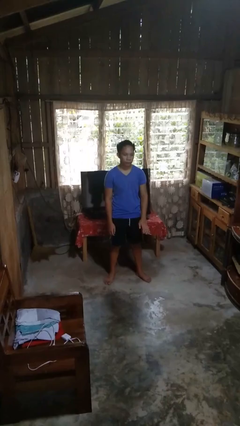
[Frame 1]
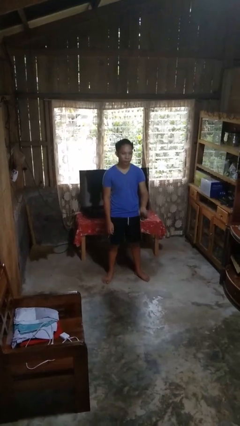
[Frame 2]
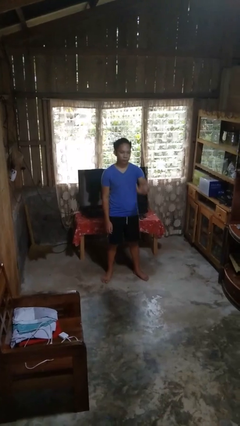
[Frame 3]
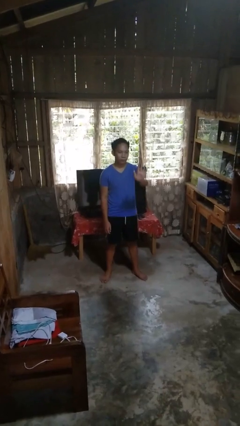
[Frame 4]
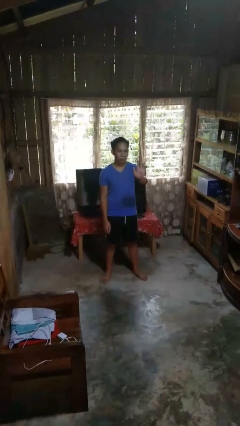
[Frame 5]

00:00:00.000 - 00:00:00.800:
person gestures stop

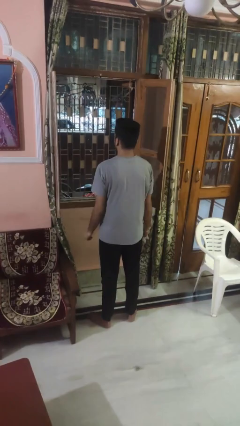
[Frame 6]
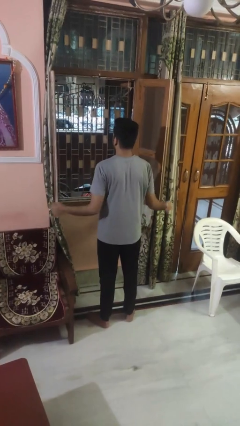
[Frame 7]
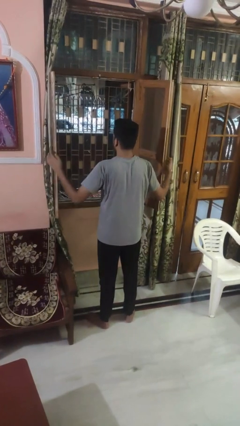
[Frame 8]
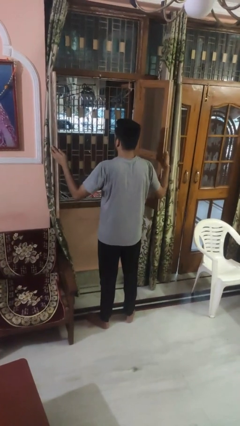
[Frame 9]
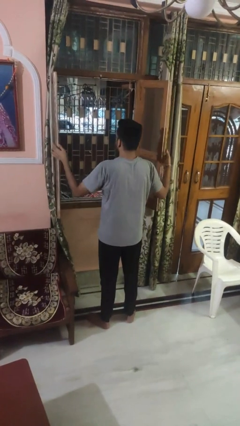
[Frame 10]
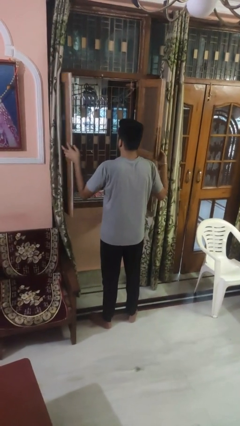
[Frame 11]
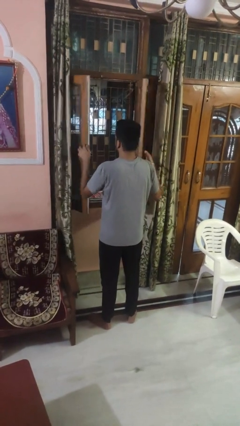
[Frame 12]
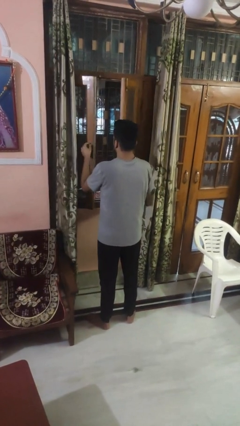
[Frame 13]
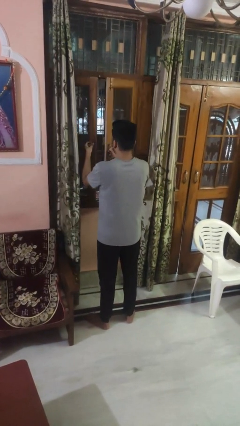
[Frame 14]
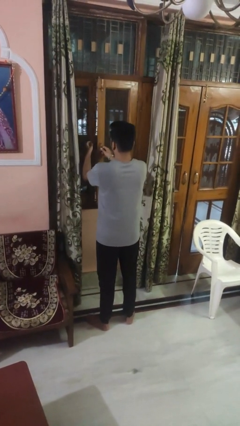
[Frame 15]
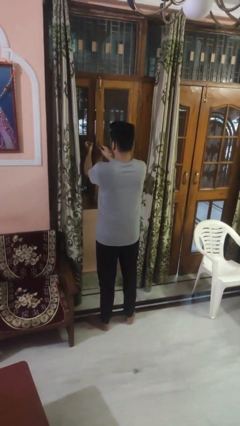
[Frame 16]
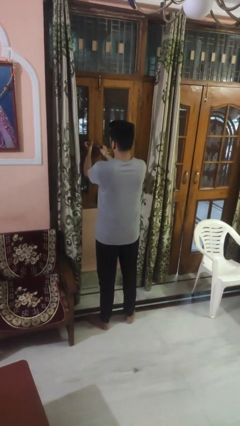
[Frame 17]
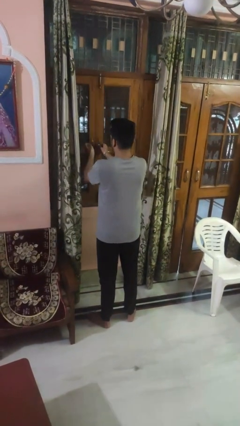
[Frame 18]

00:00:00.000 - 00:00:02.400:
person closes home window

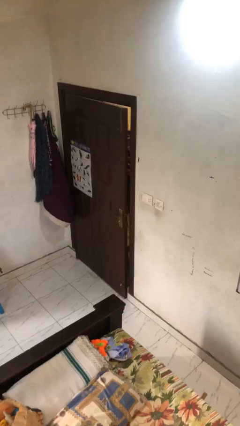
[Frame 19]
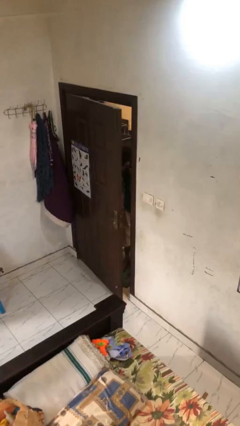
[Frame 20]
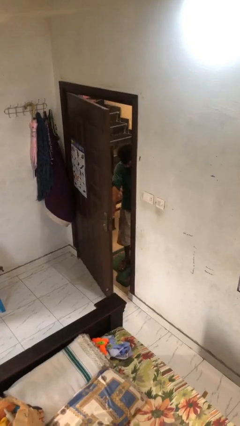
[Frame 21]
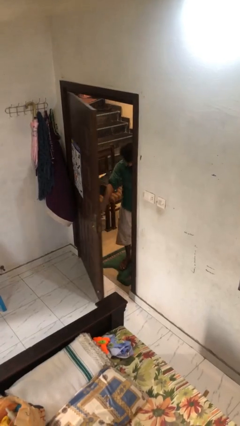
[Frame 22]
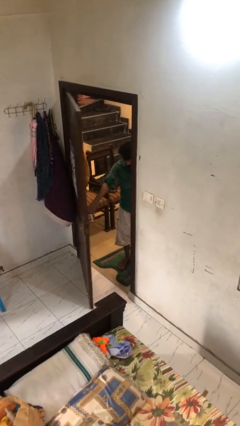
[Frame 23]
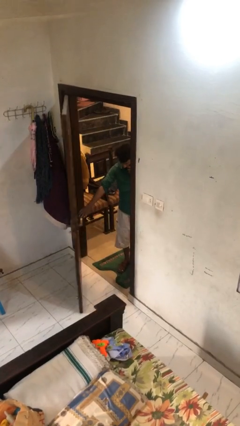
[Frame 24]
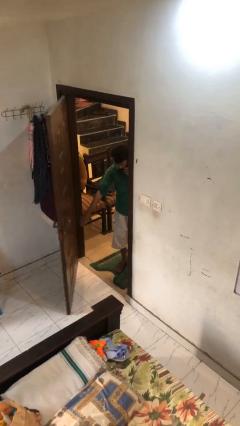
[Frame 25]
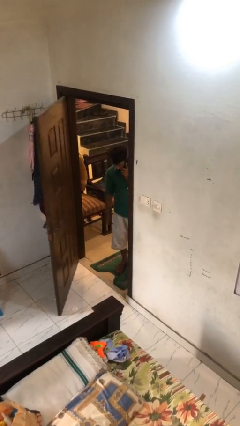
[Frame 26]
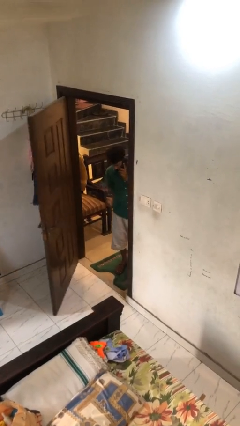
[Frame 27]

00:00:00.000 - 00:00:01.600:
person opens facility door

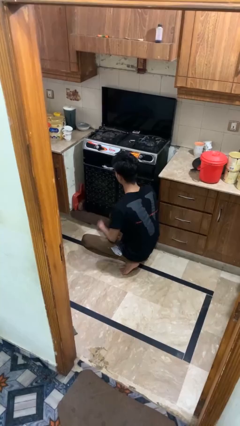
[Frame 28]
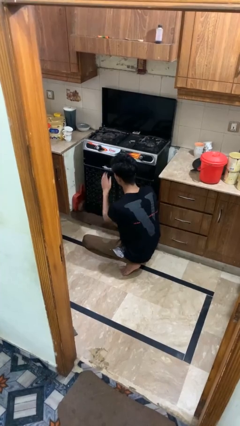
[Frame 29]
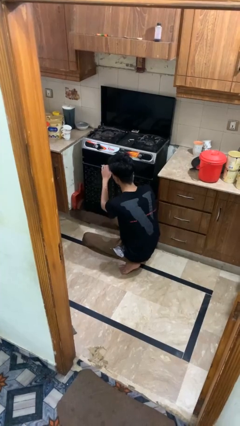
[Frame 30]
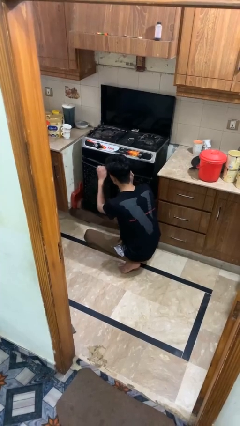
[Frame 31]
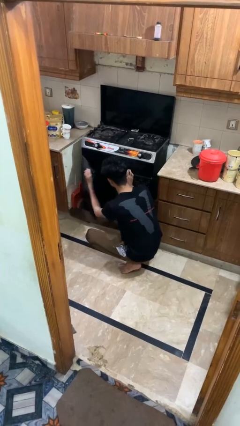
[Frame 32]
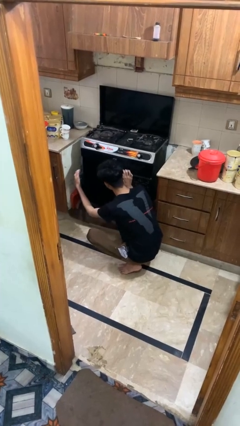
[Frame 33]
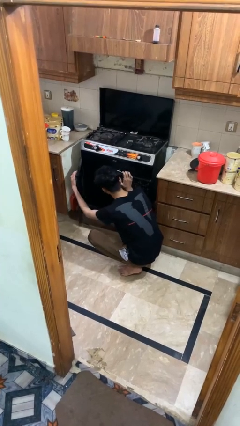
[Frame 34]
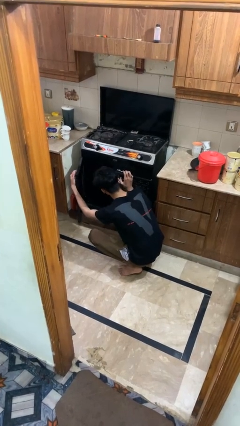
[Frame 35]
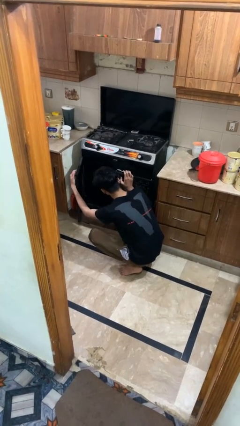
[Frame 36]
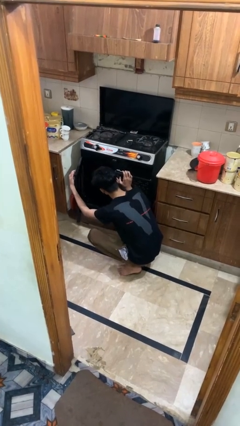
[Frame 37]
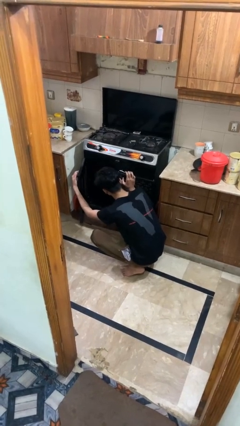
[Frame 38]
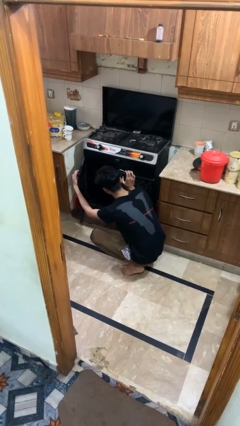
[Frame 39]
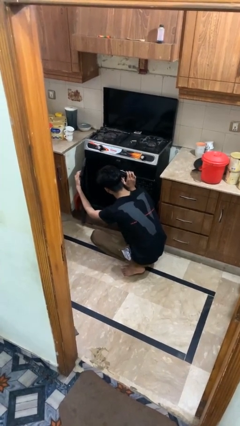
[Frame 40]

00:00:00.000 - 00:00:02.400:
person opens oven door

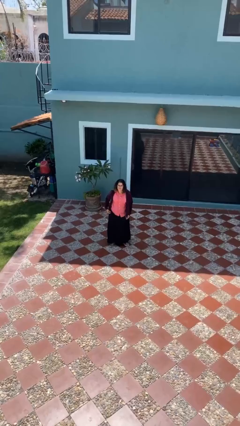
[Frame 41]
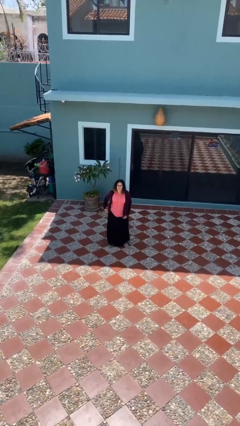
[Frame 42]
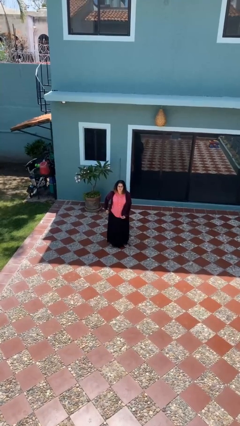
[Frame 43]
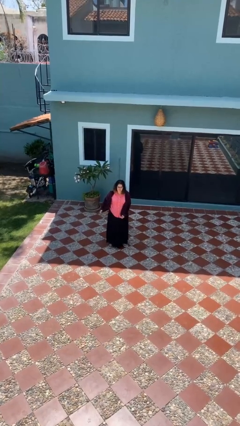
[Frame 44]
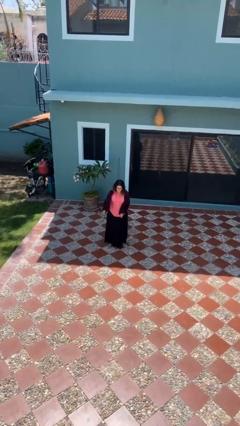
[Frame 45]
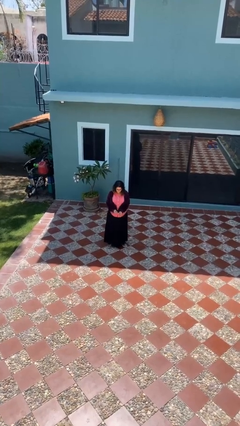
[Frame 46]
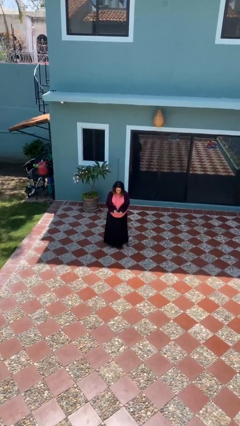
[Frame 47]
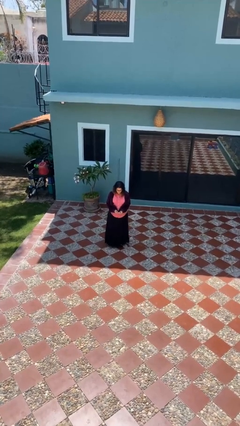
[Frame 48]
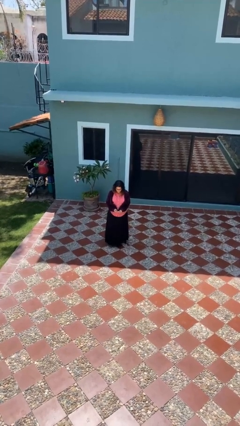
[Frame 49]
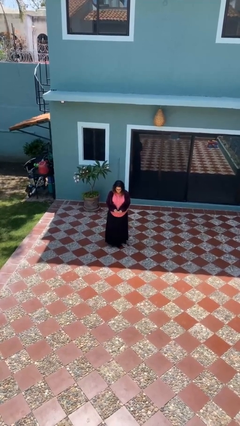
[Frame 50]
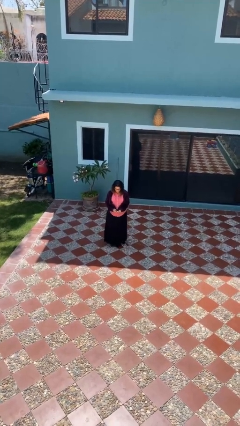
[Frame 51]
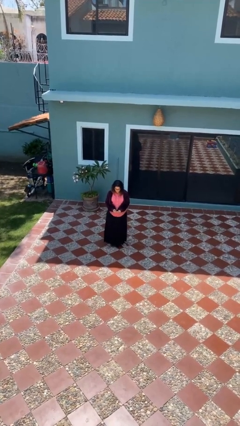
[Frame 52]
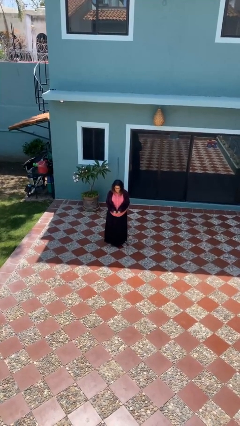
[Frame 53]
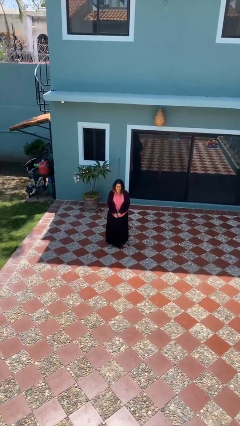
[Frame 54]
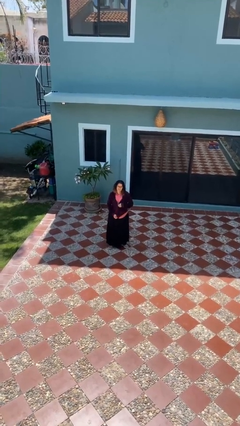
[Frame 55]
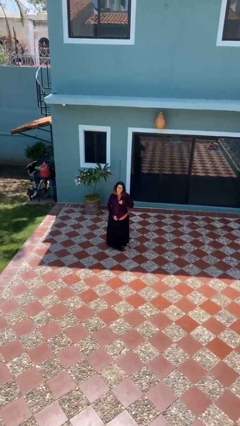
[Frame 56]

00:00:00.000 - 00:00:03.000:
person zips up jacket

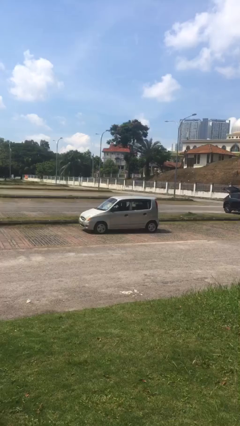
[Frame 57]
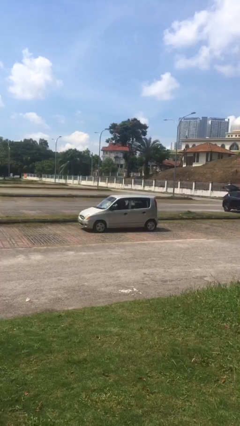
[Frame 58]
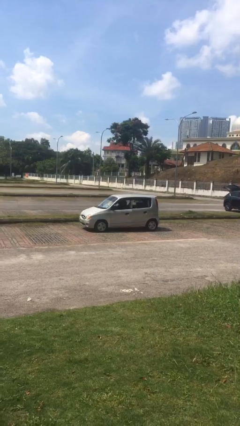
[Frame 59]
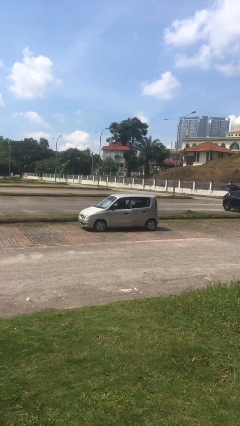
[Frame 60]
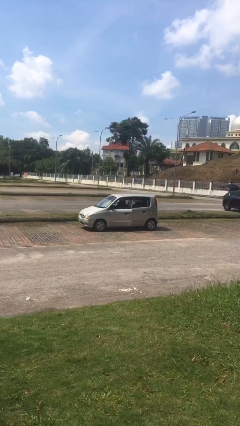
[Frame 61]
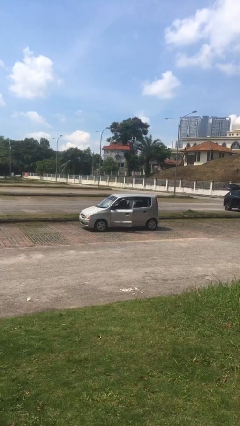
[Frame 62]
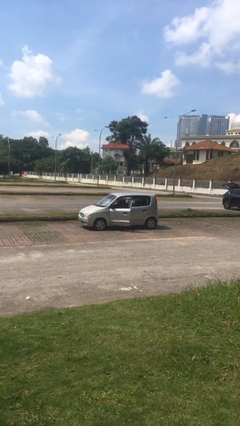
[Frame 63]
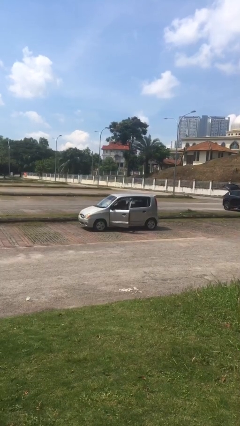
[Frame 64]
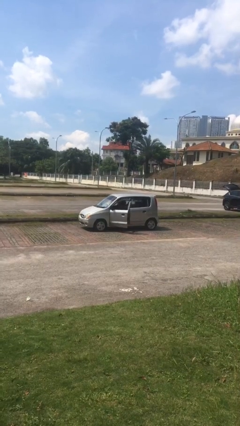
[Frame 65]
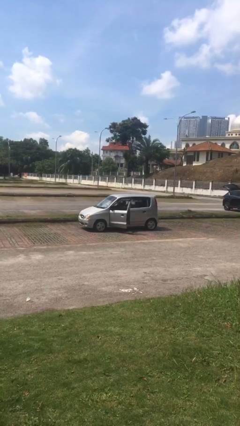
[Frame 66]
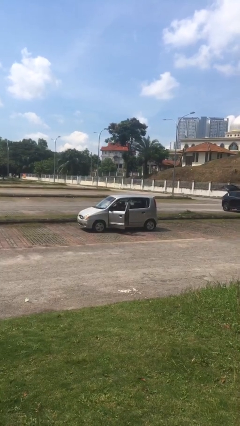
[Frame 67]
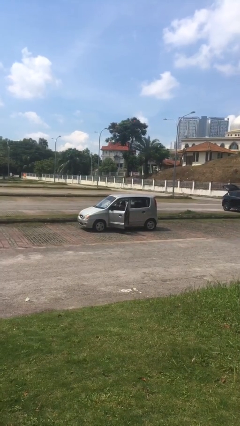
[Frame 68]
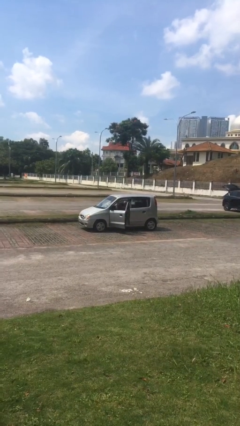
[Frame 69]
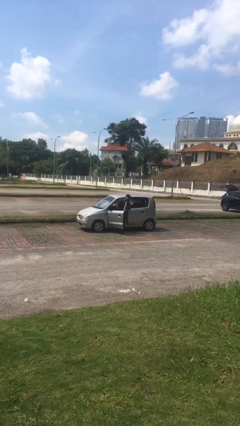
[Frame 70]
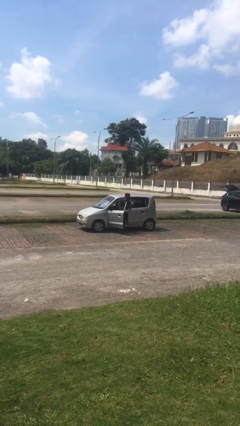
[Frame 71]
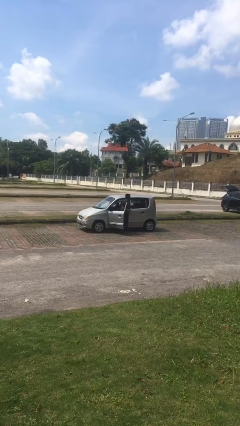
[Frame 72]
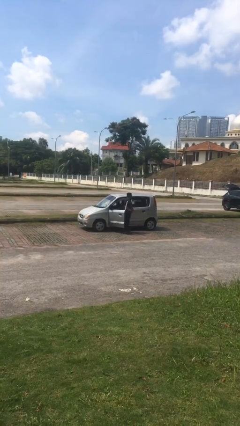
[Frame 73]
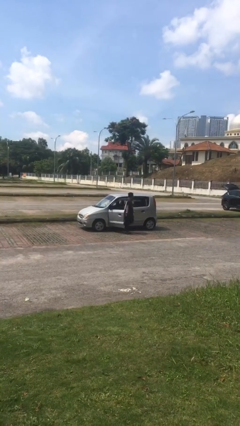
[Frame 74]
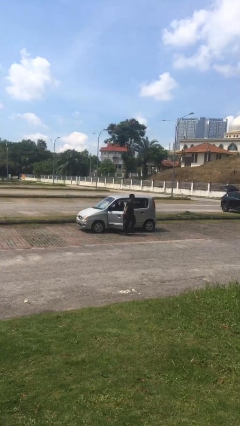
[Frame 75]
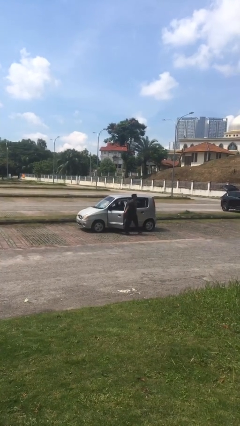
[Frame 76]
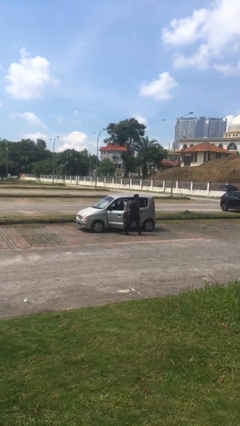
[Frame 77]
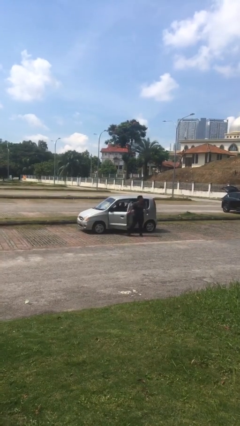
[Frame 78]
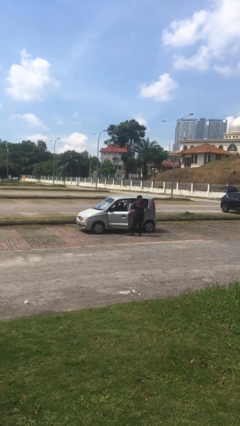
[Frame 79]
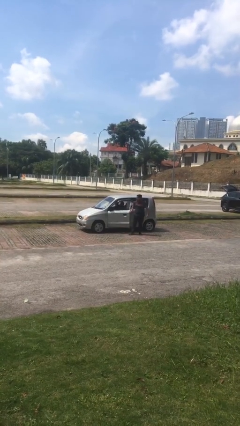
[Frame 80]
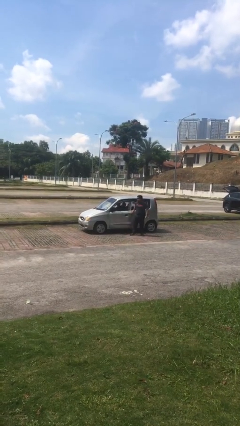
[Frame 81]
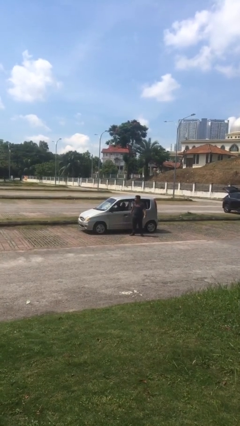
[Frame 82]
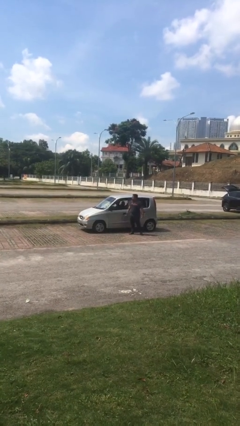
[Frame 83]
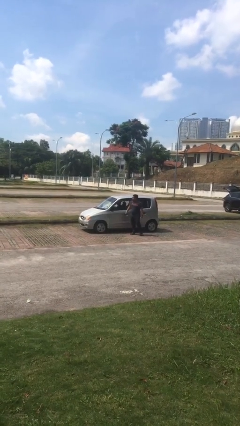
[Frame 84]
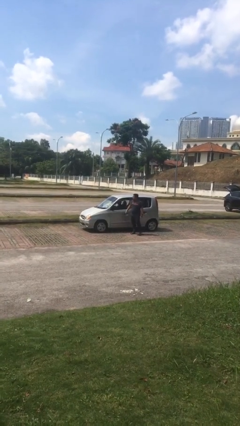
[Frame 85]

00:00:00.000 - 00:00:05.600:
car drops off person

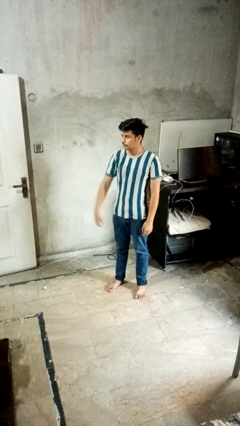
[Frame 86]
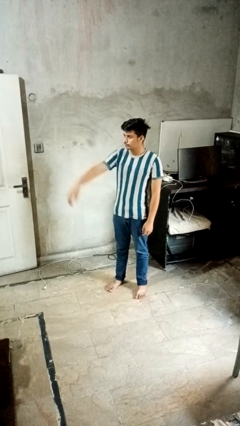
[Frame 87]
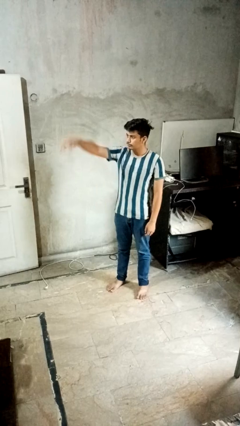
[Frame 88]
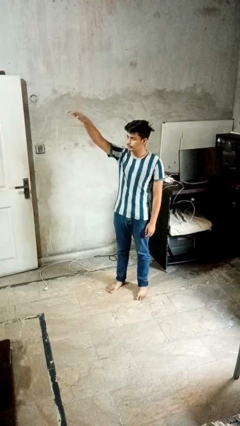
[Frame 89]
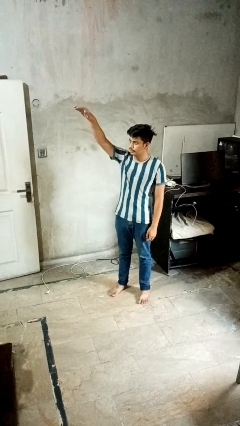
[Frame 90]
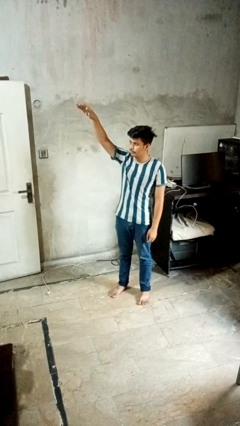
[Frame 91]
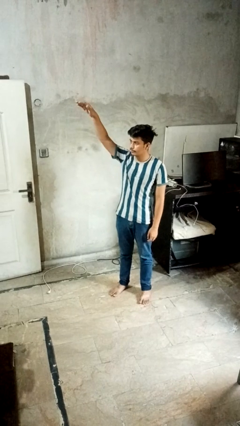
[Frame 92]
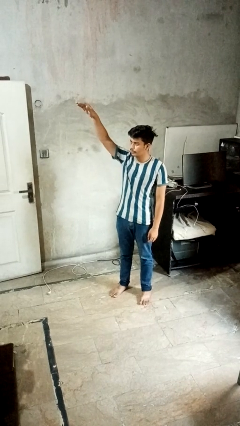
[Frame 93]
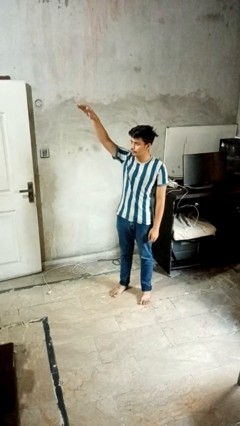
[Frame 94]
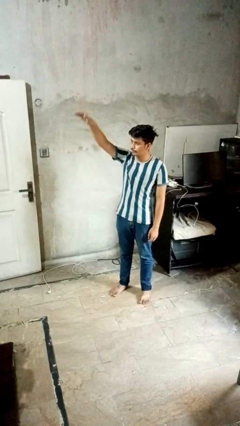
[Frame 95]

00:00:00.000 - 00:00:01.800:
person gestures swipe up
